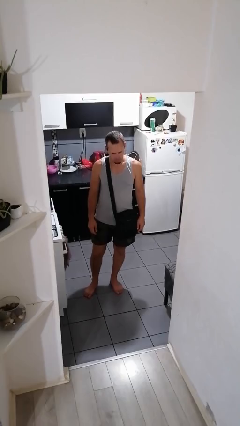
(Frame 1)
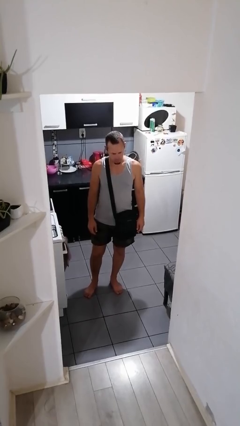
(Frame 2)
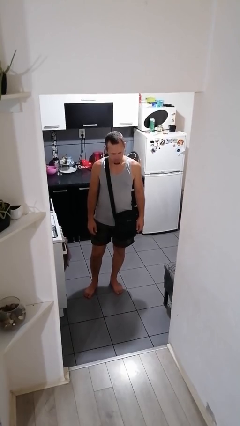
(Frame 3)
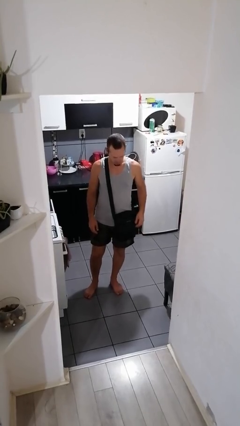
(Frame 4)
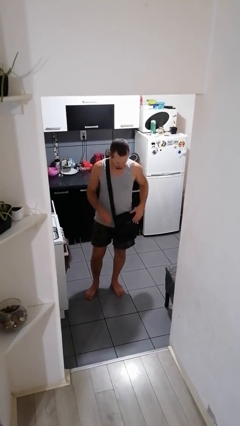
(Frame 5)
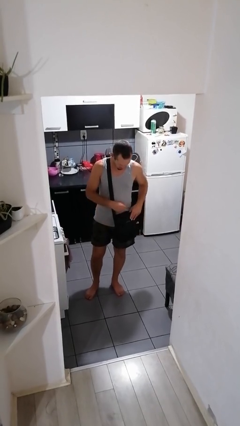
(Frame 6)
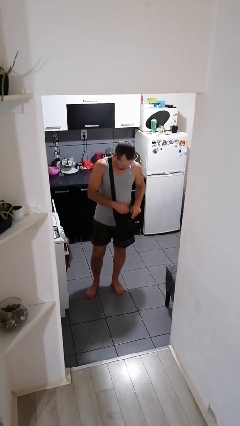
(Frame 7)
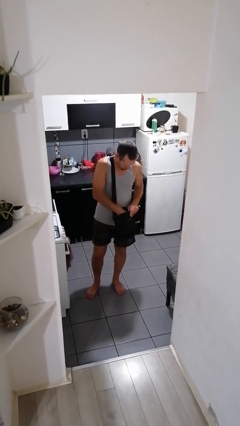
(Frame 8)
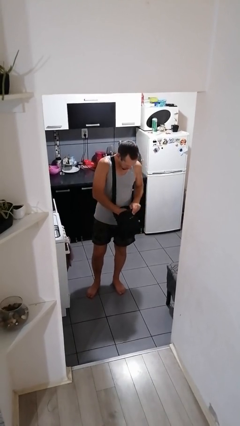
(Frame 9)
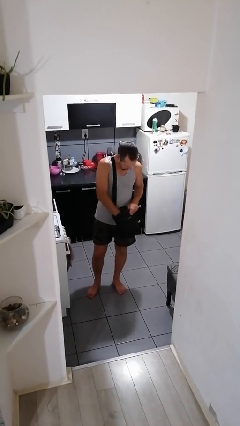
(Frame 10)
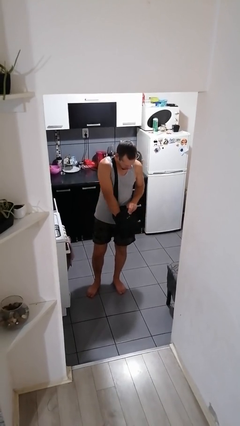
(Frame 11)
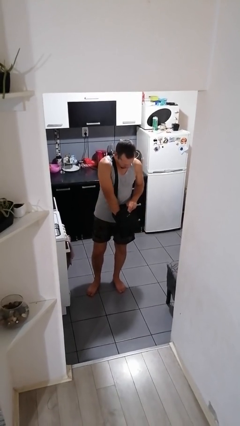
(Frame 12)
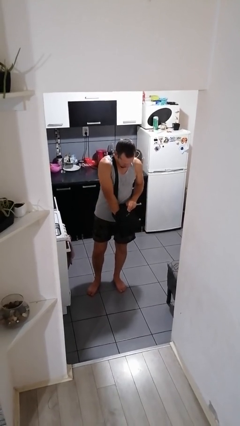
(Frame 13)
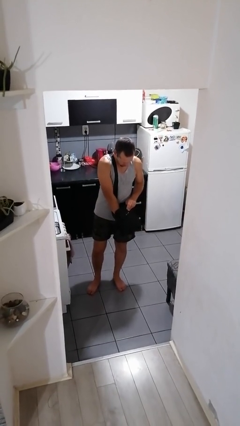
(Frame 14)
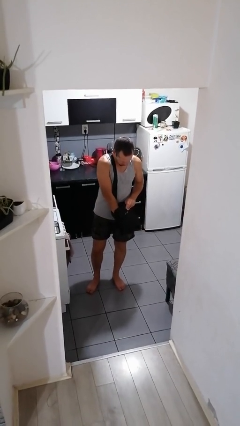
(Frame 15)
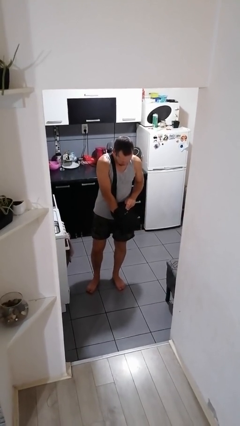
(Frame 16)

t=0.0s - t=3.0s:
person searches in purse

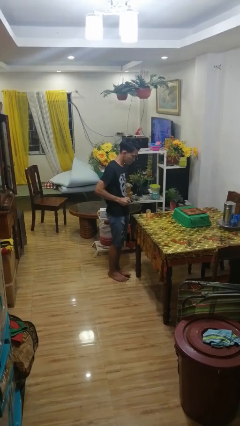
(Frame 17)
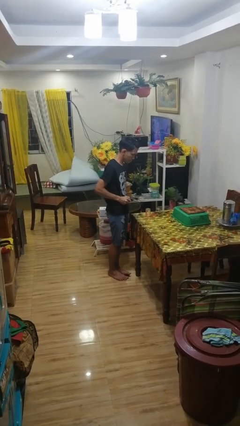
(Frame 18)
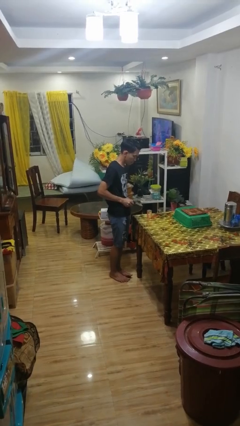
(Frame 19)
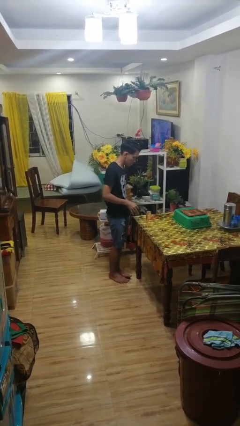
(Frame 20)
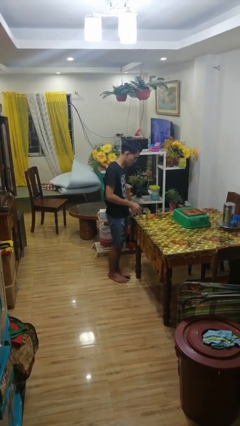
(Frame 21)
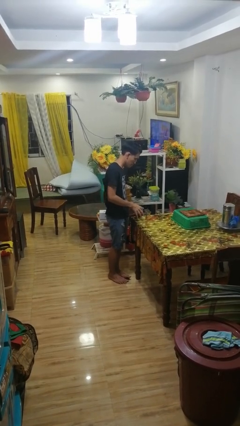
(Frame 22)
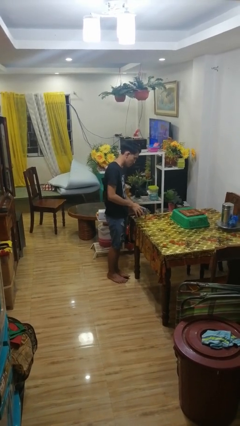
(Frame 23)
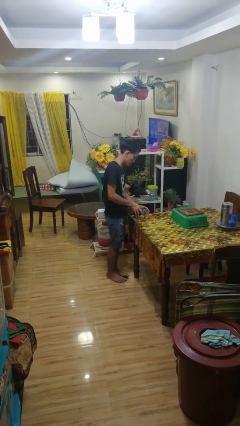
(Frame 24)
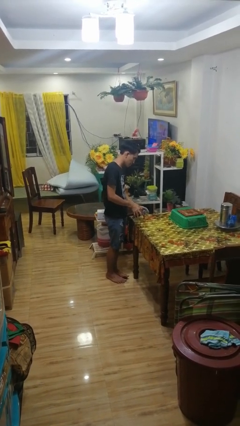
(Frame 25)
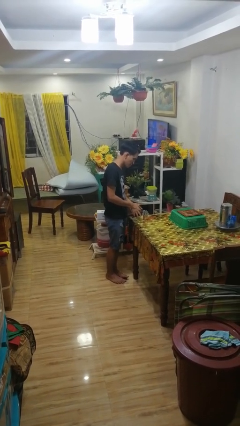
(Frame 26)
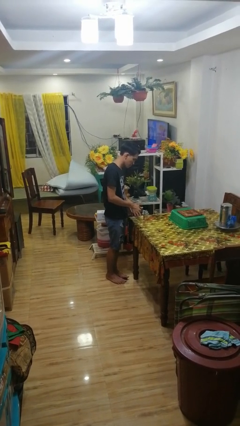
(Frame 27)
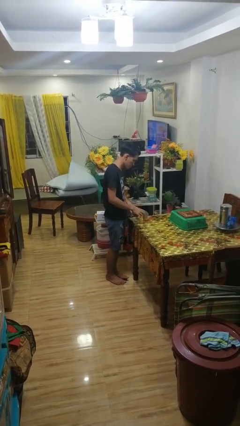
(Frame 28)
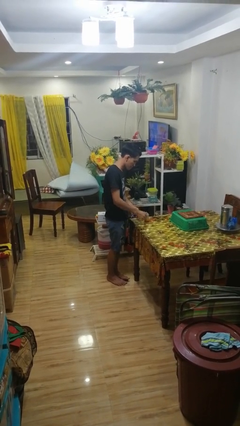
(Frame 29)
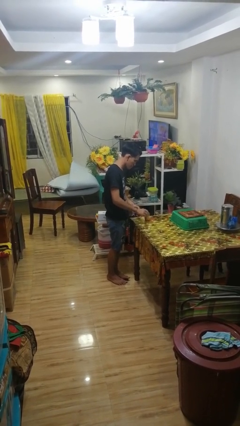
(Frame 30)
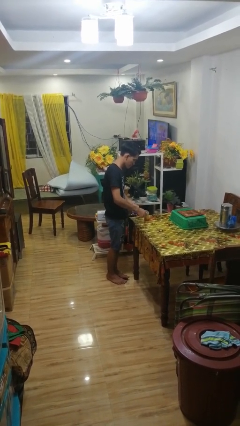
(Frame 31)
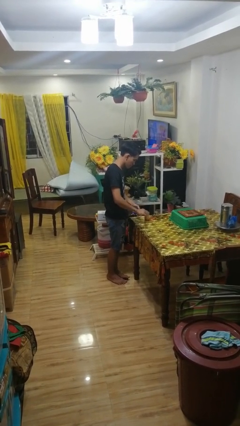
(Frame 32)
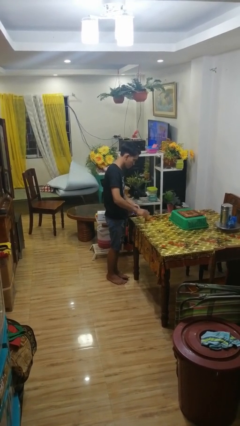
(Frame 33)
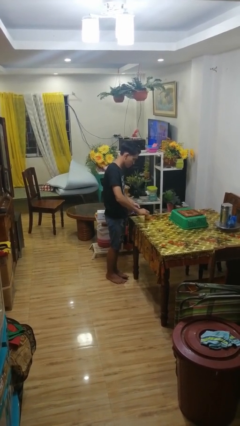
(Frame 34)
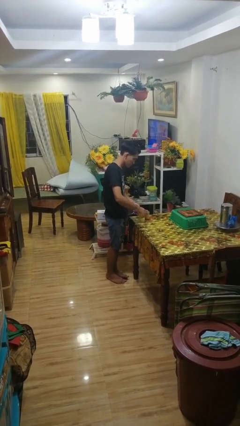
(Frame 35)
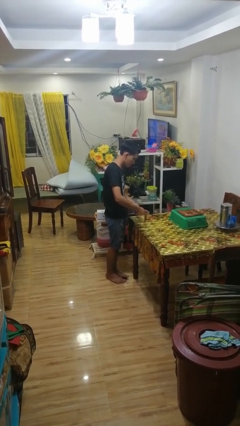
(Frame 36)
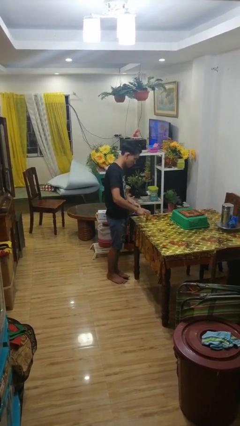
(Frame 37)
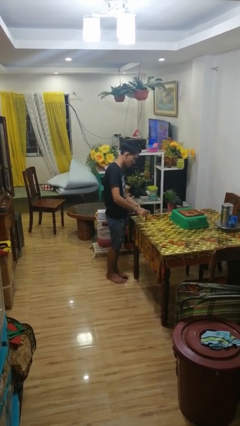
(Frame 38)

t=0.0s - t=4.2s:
person opens can with can opener

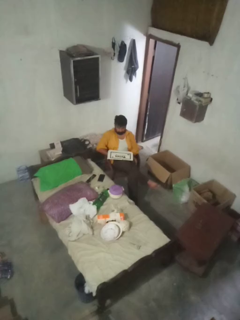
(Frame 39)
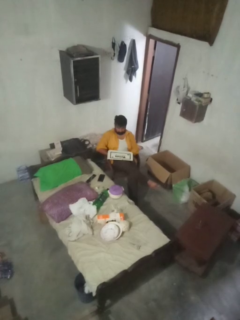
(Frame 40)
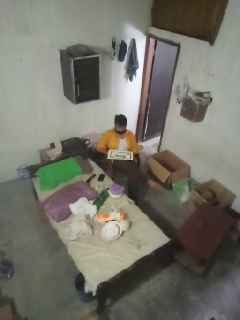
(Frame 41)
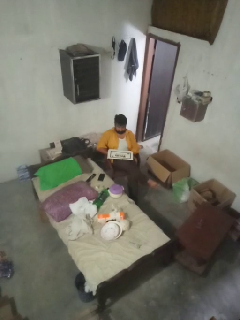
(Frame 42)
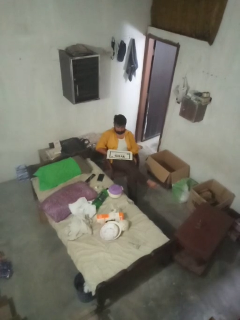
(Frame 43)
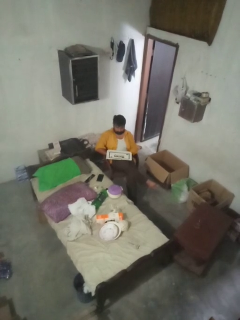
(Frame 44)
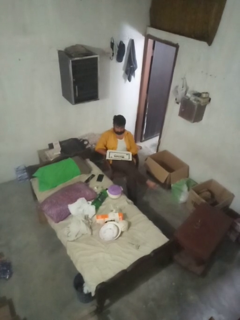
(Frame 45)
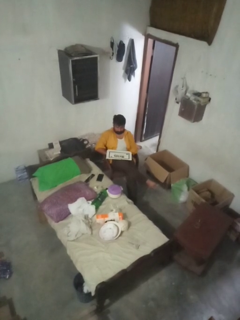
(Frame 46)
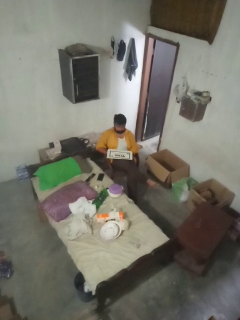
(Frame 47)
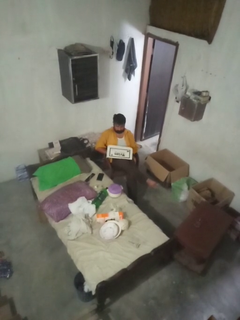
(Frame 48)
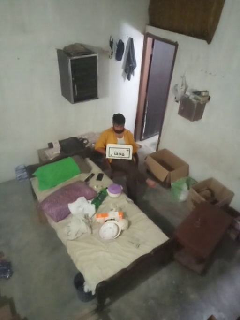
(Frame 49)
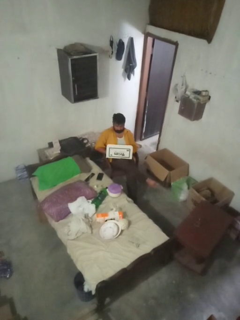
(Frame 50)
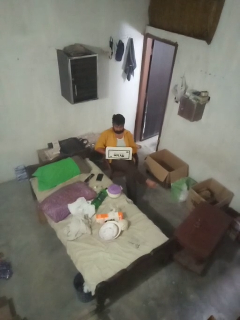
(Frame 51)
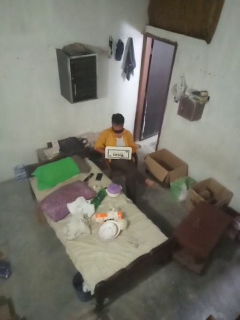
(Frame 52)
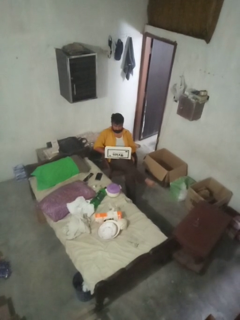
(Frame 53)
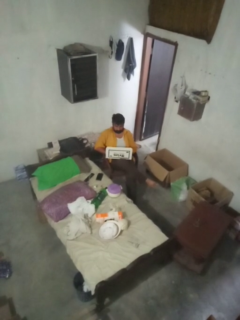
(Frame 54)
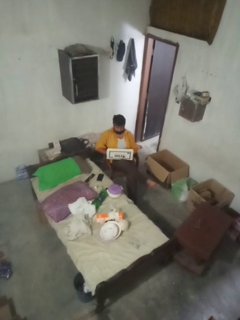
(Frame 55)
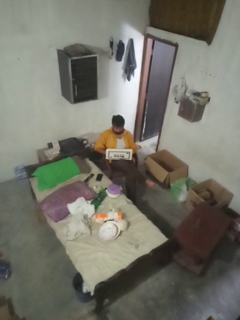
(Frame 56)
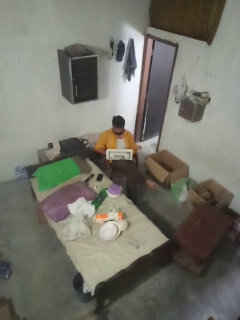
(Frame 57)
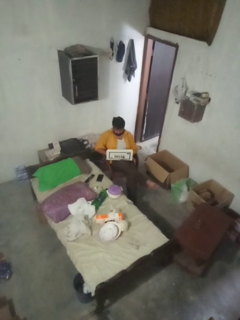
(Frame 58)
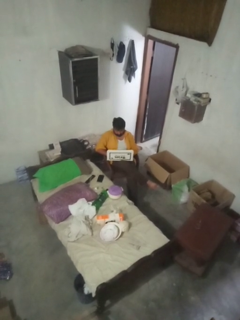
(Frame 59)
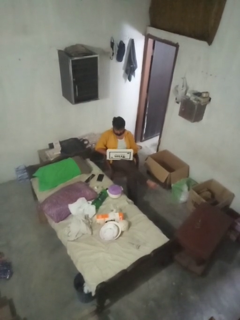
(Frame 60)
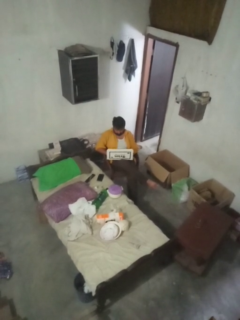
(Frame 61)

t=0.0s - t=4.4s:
person opens laptop

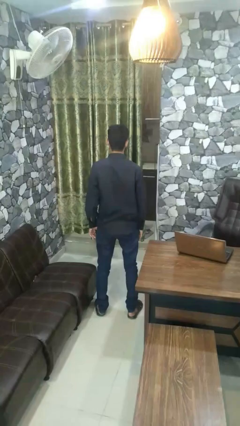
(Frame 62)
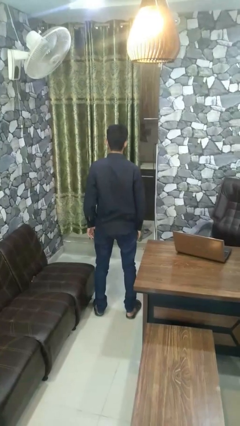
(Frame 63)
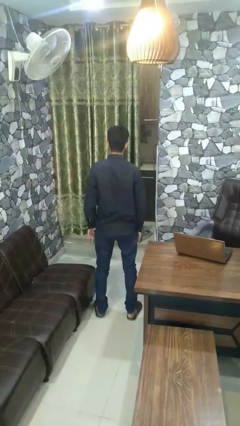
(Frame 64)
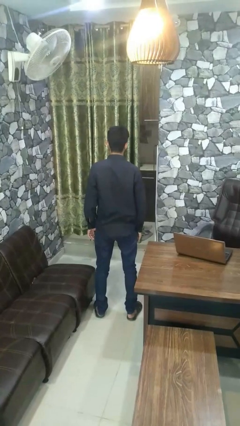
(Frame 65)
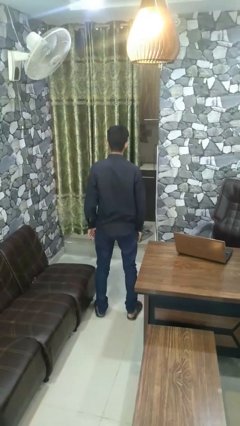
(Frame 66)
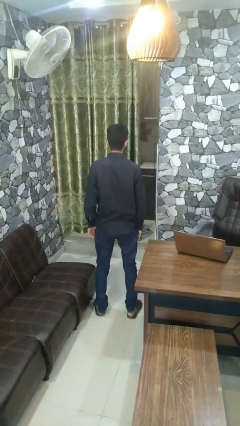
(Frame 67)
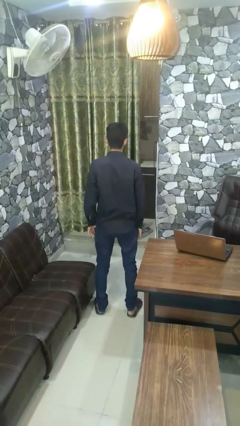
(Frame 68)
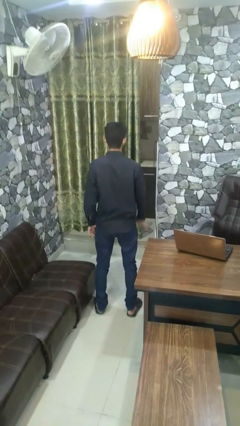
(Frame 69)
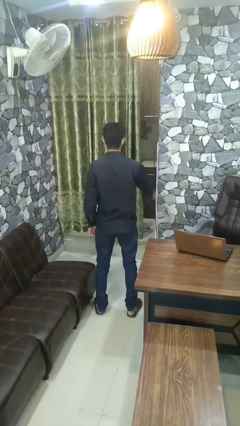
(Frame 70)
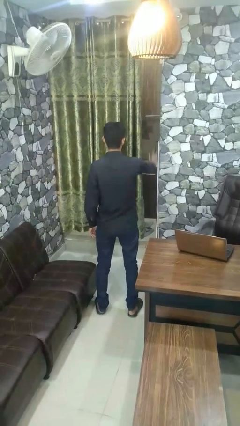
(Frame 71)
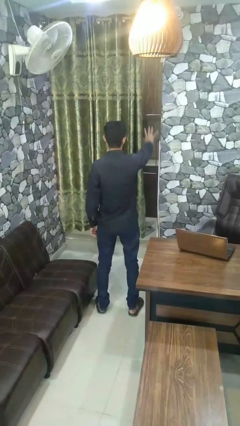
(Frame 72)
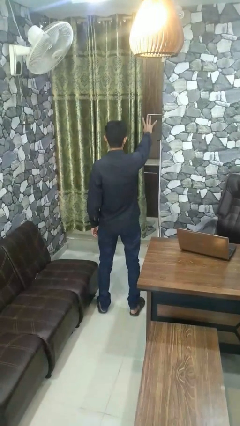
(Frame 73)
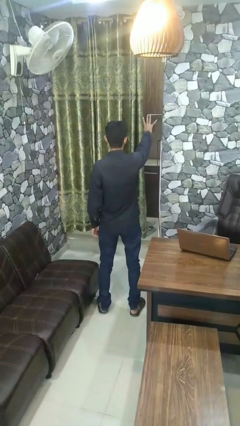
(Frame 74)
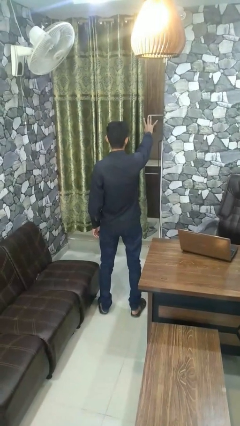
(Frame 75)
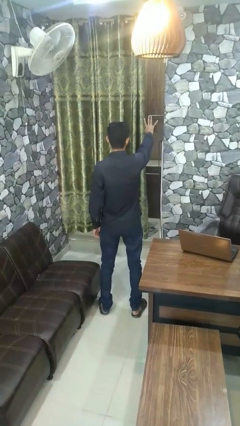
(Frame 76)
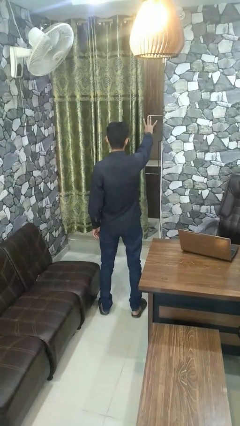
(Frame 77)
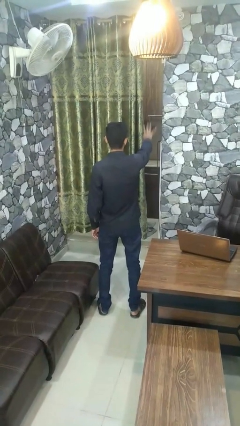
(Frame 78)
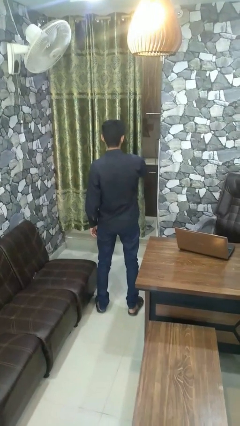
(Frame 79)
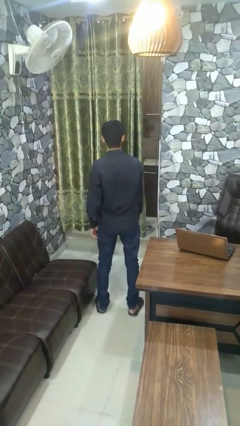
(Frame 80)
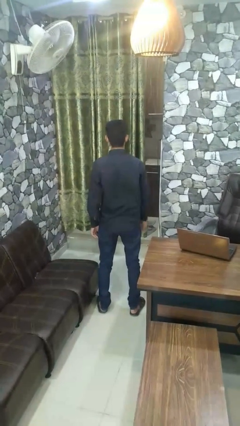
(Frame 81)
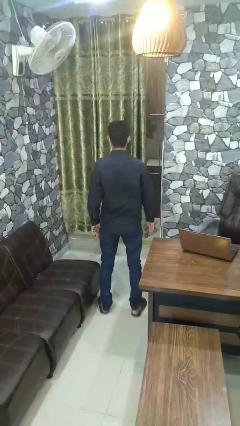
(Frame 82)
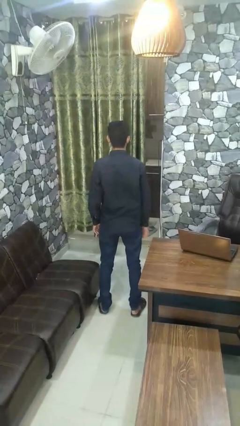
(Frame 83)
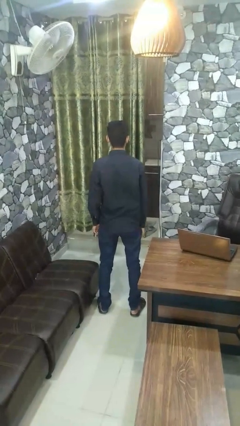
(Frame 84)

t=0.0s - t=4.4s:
person gestures number four

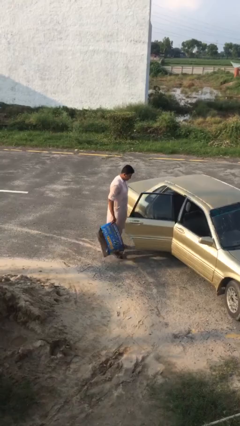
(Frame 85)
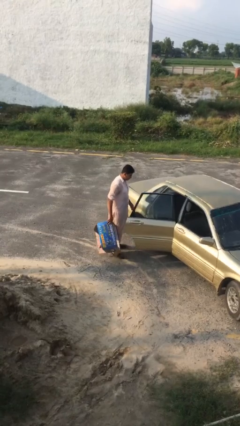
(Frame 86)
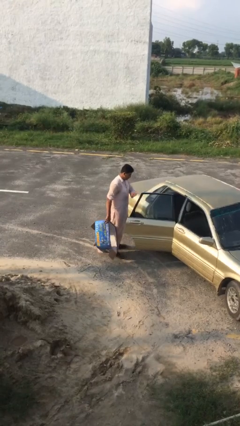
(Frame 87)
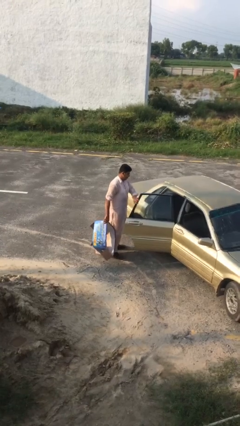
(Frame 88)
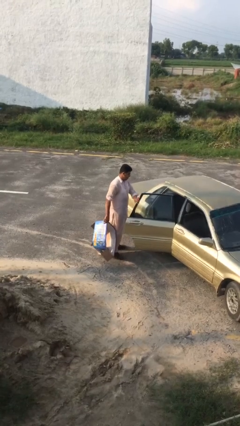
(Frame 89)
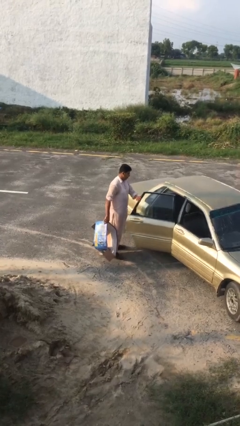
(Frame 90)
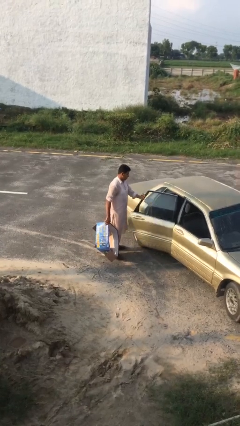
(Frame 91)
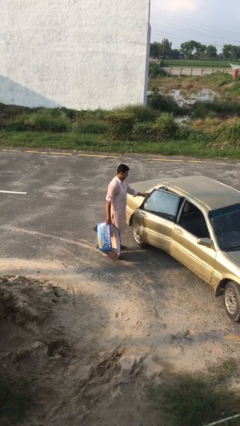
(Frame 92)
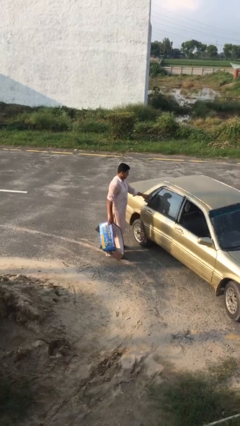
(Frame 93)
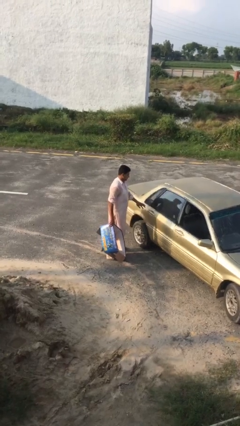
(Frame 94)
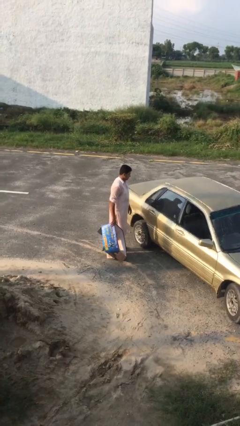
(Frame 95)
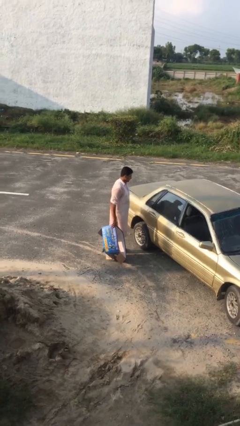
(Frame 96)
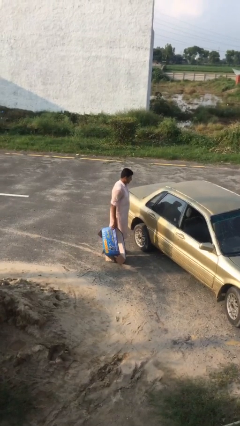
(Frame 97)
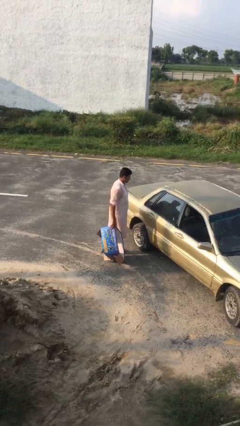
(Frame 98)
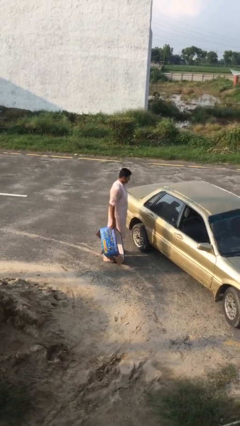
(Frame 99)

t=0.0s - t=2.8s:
person closes car door
